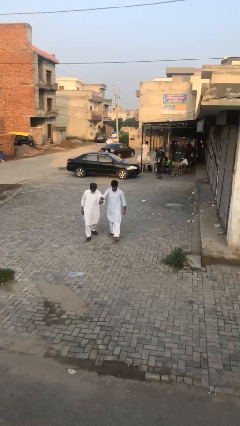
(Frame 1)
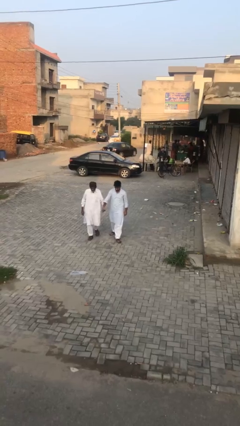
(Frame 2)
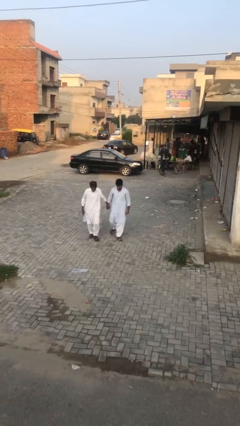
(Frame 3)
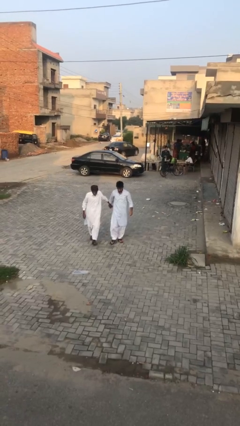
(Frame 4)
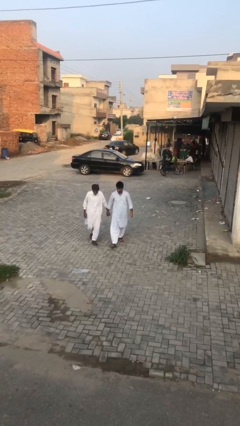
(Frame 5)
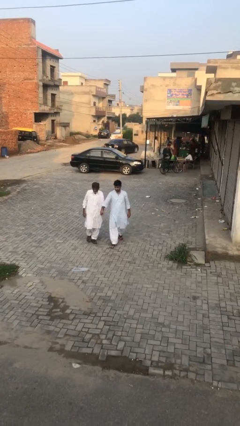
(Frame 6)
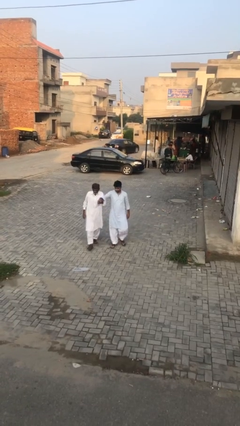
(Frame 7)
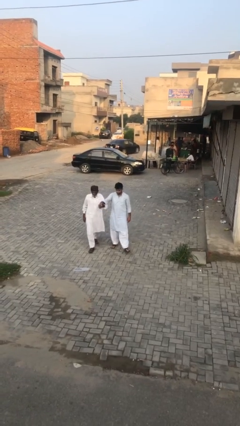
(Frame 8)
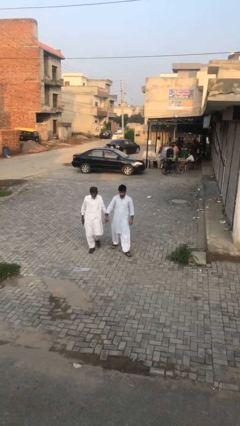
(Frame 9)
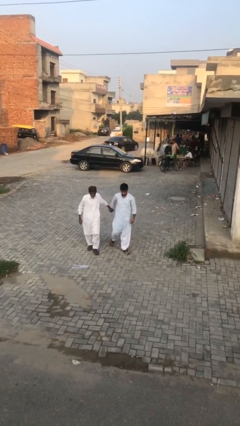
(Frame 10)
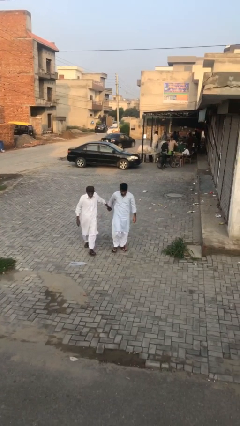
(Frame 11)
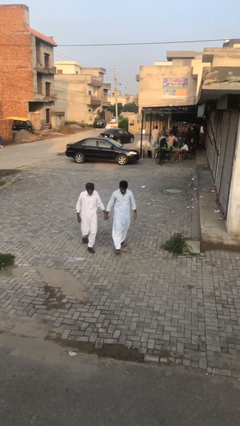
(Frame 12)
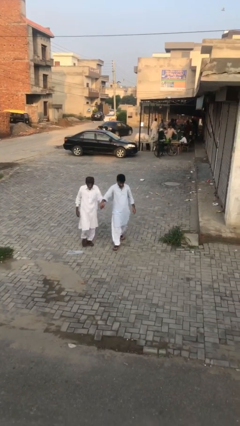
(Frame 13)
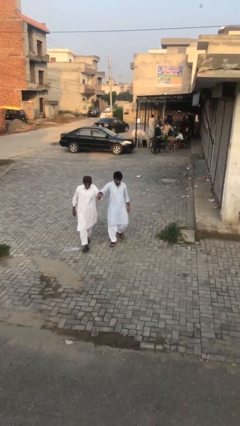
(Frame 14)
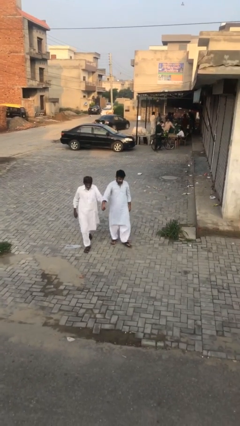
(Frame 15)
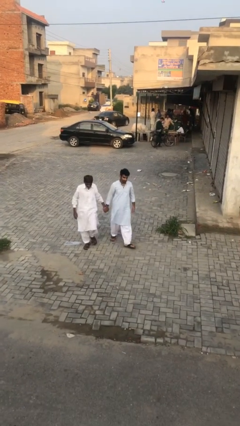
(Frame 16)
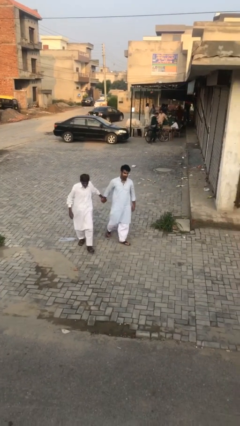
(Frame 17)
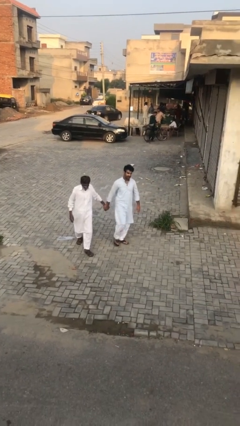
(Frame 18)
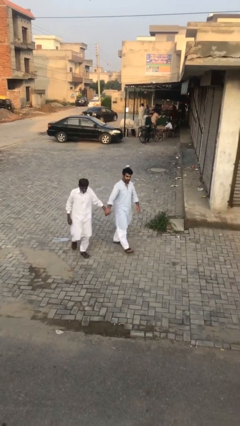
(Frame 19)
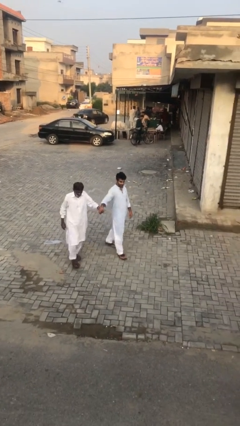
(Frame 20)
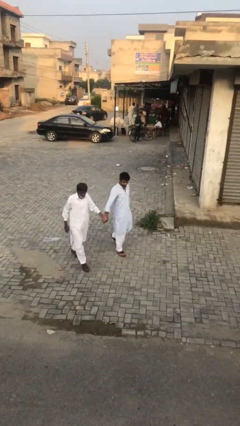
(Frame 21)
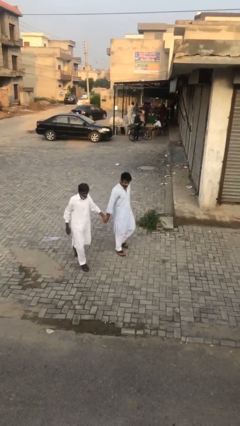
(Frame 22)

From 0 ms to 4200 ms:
person holds hand

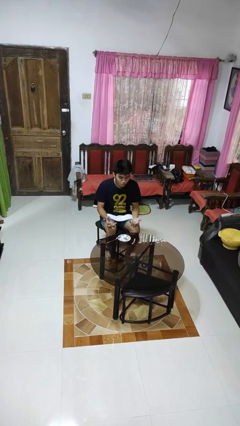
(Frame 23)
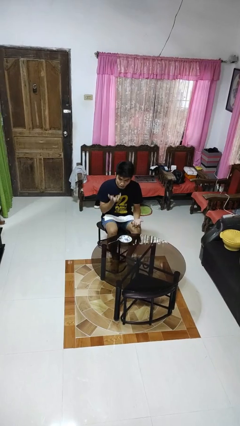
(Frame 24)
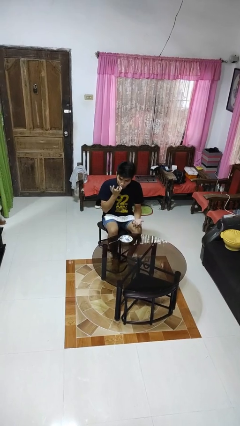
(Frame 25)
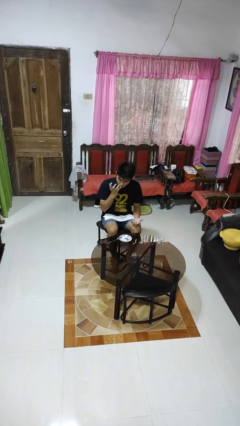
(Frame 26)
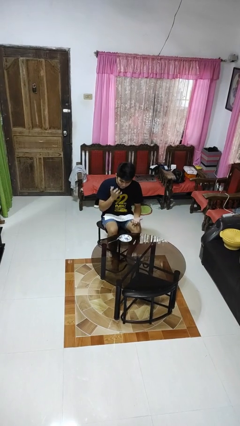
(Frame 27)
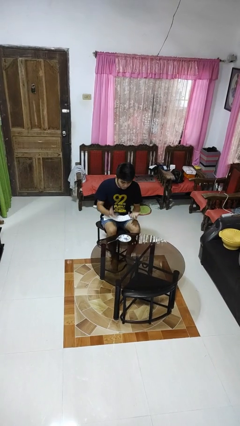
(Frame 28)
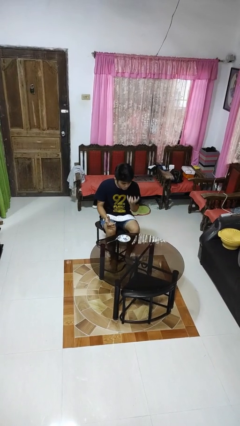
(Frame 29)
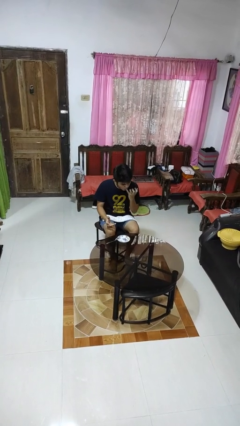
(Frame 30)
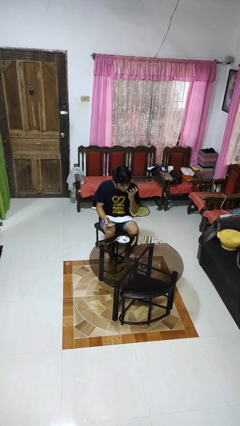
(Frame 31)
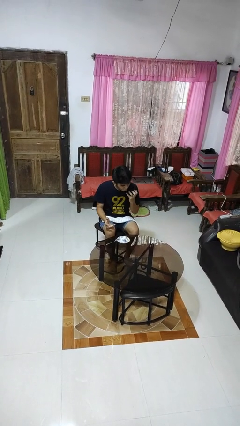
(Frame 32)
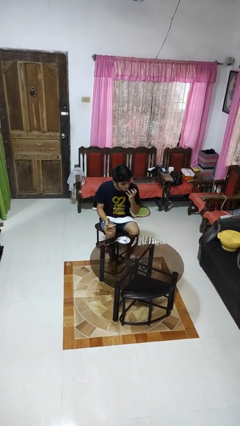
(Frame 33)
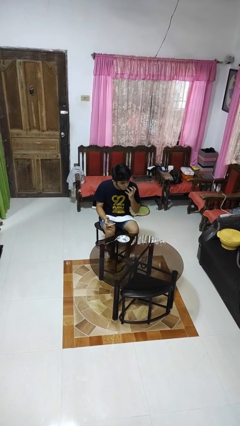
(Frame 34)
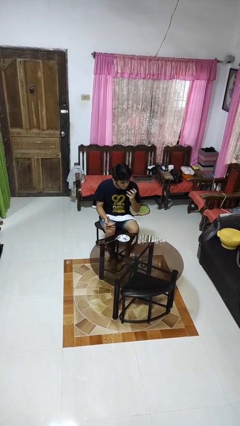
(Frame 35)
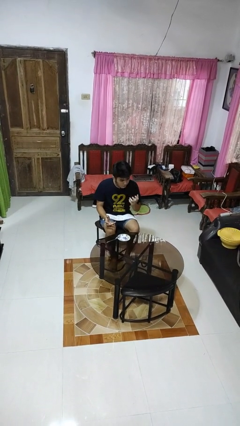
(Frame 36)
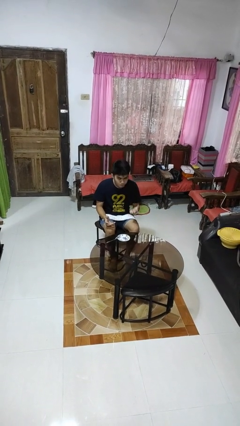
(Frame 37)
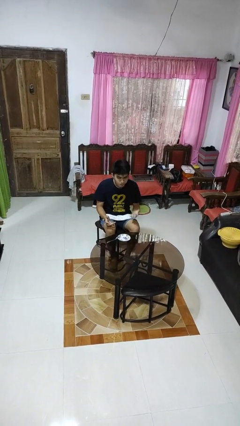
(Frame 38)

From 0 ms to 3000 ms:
person licks fingers

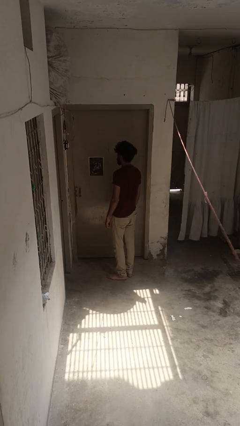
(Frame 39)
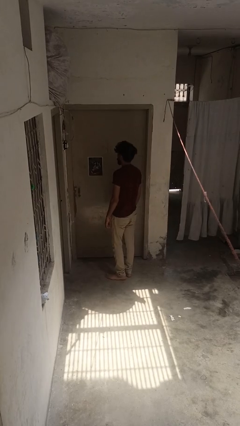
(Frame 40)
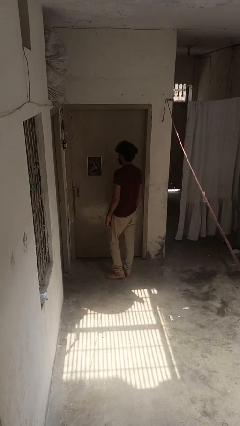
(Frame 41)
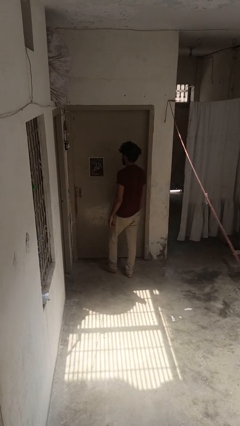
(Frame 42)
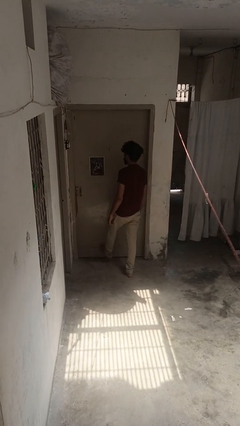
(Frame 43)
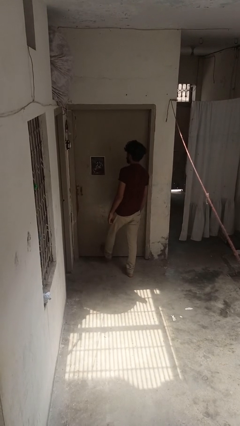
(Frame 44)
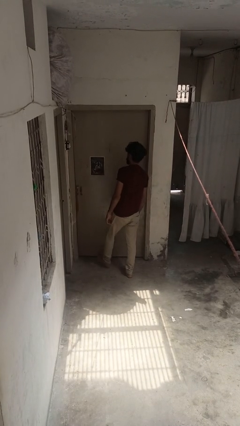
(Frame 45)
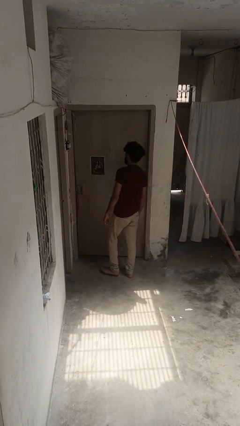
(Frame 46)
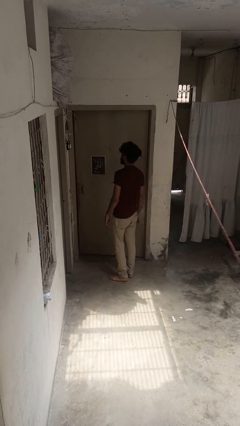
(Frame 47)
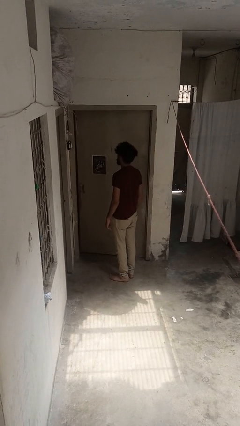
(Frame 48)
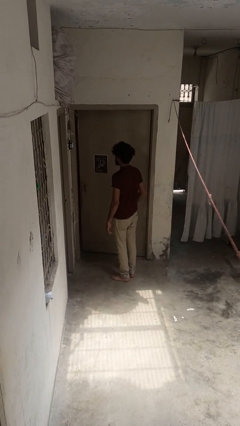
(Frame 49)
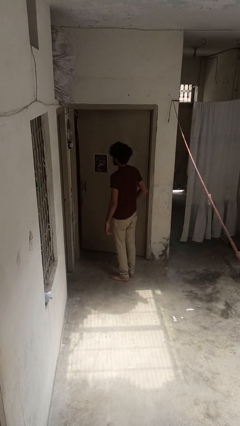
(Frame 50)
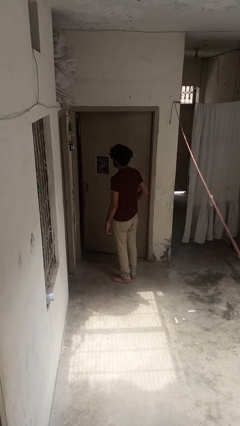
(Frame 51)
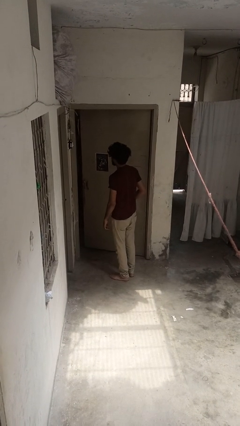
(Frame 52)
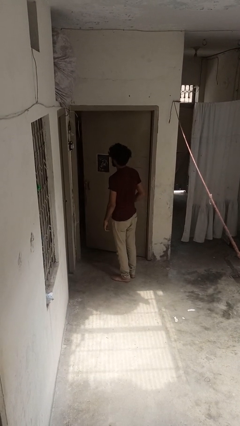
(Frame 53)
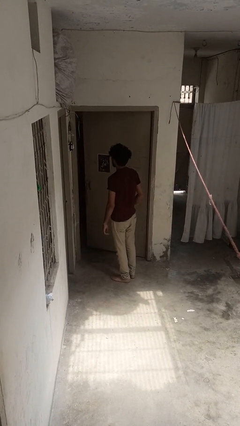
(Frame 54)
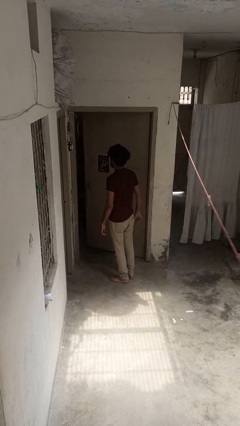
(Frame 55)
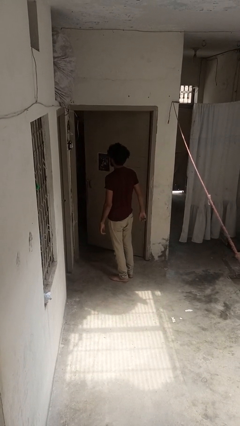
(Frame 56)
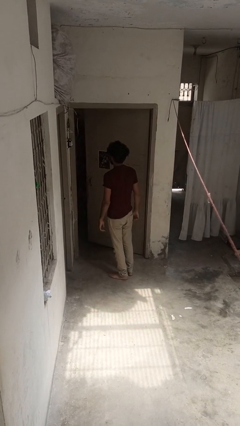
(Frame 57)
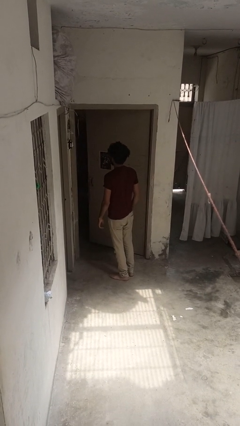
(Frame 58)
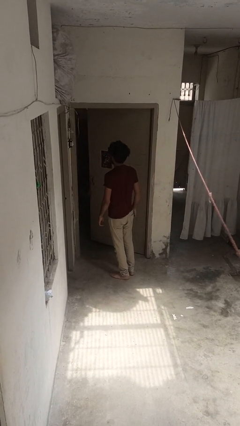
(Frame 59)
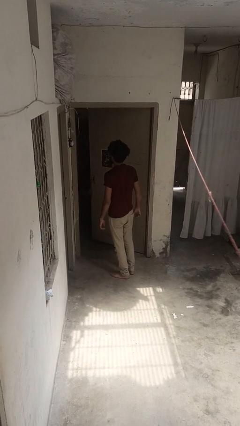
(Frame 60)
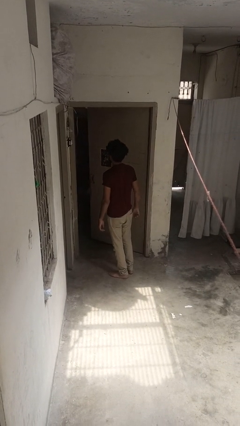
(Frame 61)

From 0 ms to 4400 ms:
person opens facility door

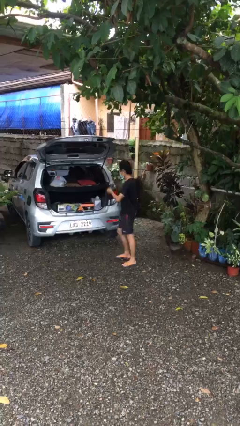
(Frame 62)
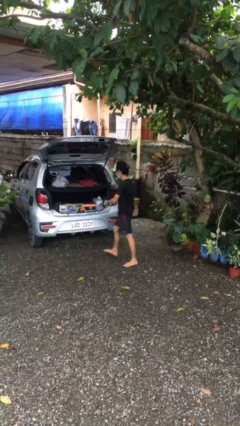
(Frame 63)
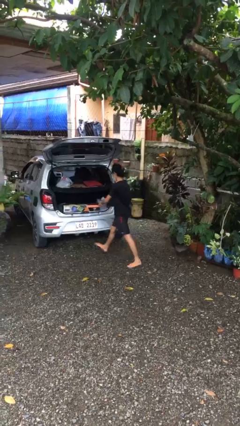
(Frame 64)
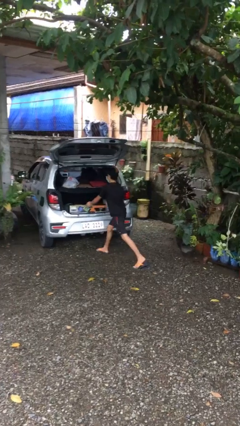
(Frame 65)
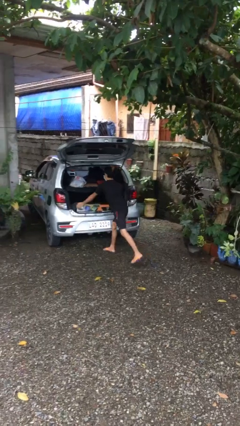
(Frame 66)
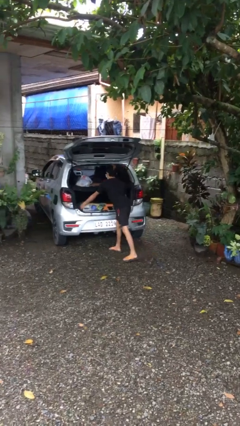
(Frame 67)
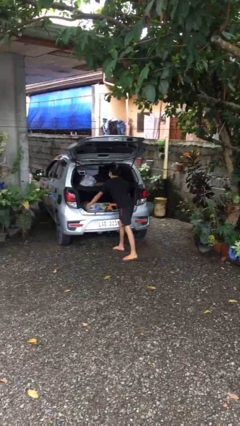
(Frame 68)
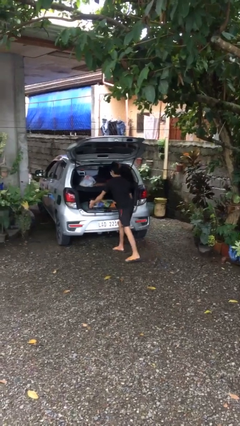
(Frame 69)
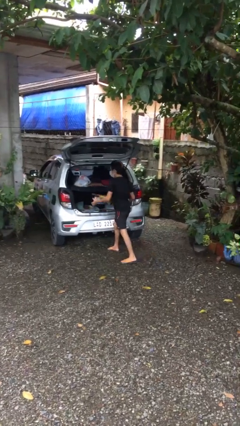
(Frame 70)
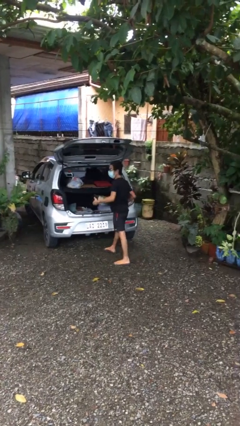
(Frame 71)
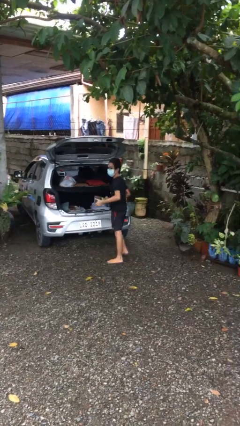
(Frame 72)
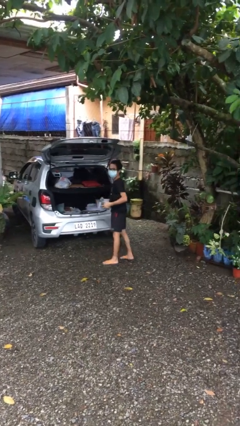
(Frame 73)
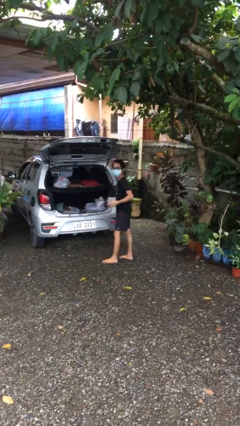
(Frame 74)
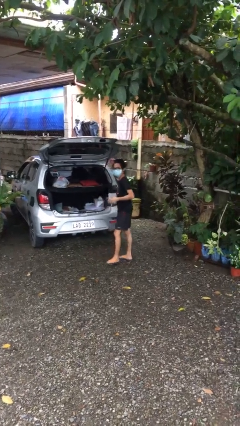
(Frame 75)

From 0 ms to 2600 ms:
person unloads car

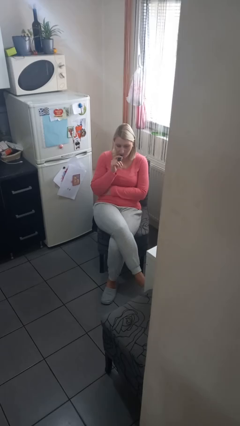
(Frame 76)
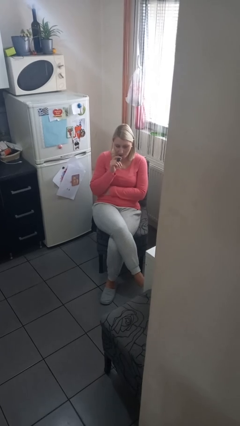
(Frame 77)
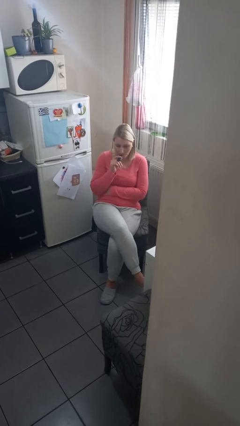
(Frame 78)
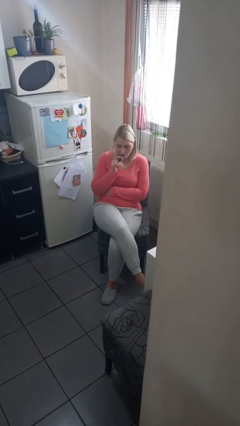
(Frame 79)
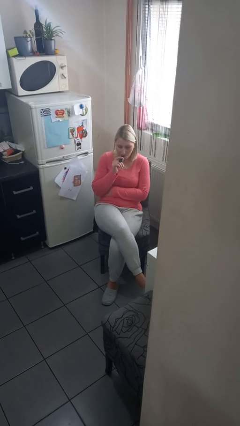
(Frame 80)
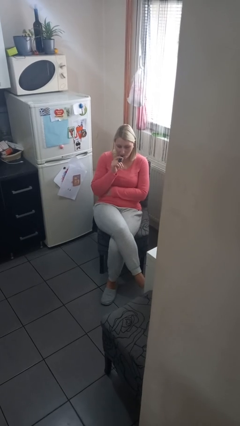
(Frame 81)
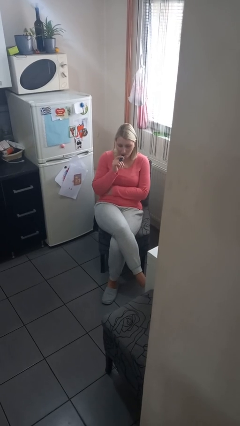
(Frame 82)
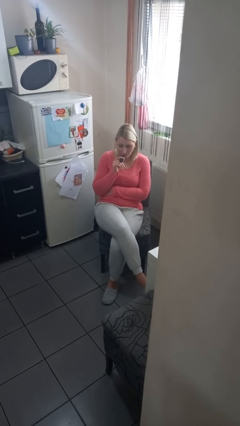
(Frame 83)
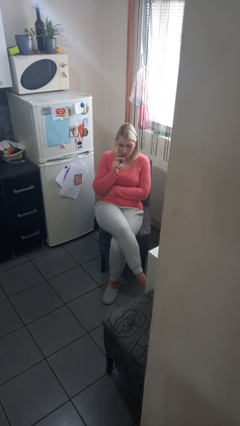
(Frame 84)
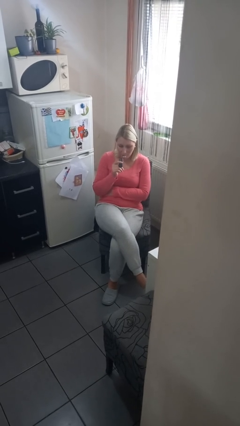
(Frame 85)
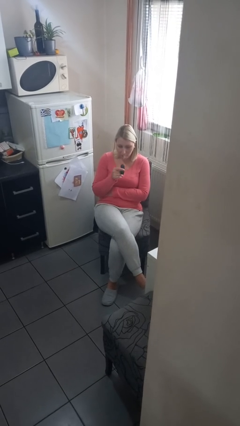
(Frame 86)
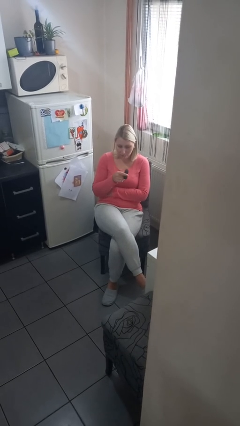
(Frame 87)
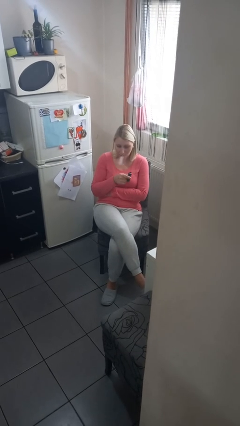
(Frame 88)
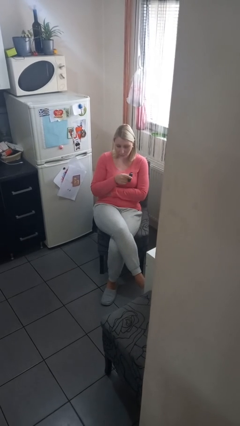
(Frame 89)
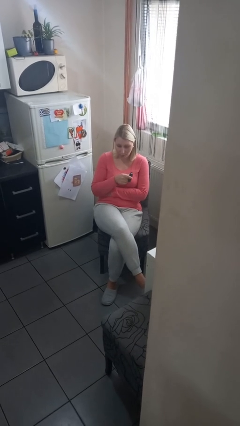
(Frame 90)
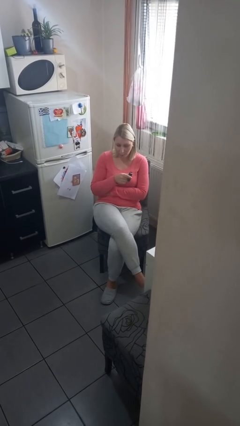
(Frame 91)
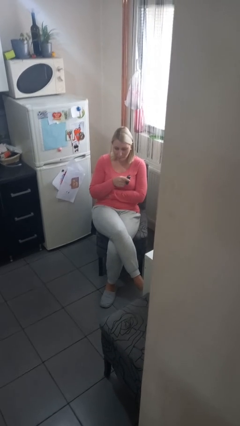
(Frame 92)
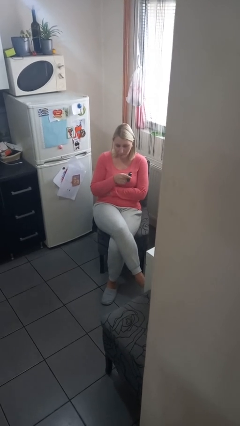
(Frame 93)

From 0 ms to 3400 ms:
person vapes

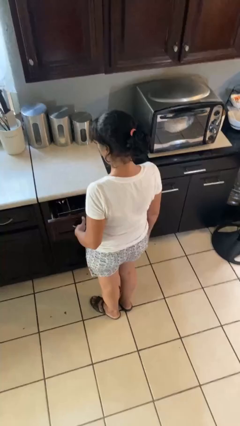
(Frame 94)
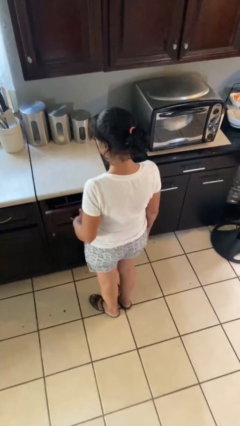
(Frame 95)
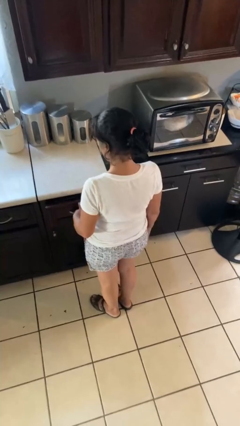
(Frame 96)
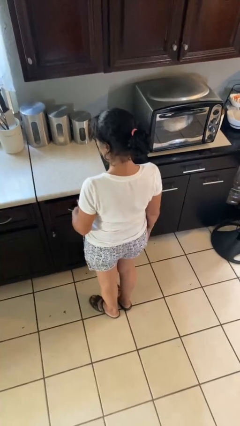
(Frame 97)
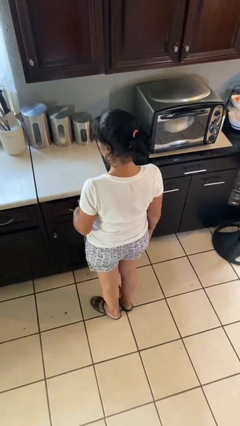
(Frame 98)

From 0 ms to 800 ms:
person closes kitchen drawer
